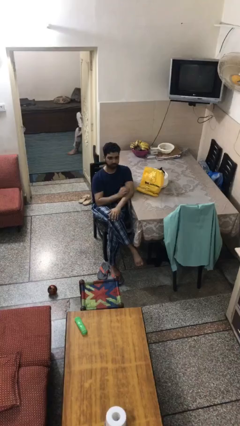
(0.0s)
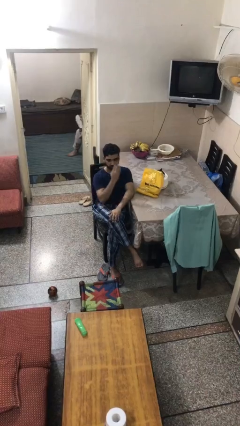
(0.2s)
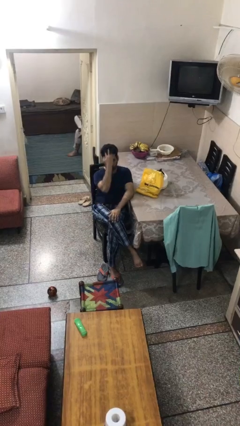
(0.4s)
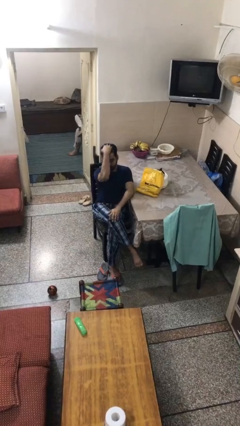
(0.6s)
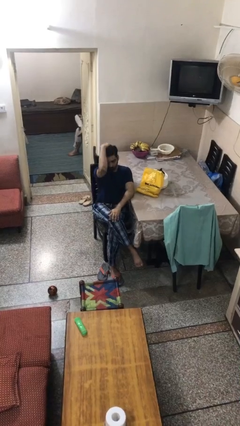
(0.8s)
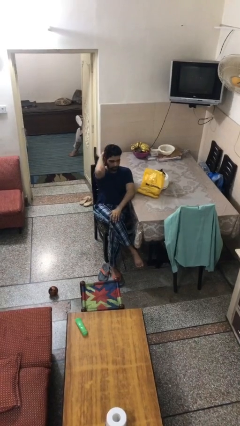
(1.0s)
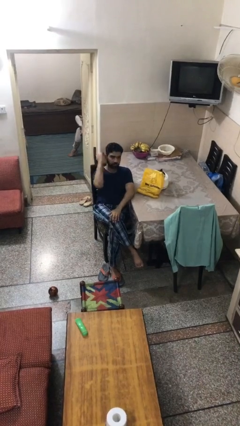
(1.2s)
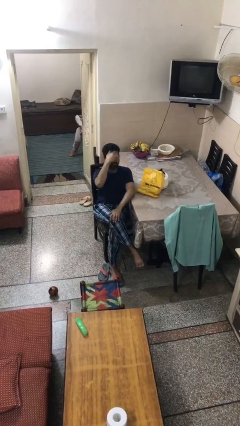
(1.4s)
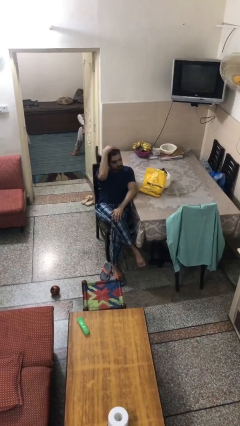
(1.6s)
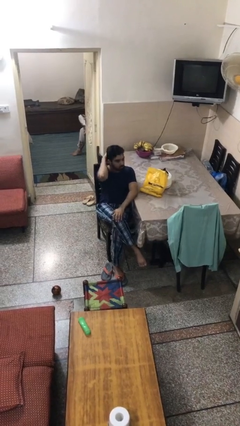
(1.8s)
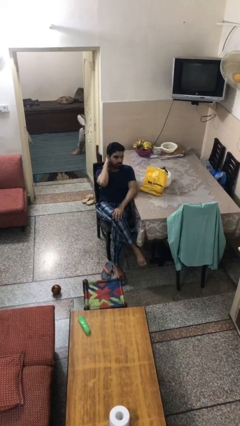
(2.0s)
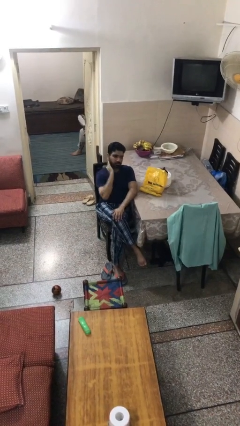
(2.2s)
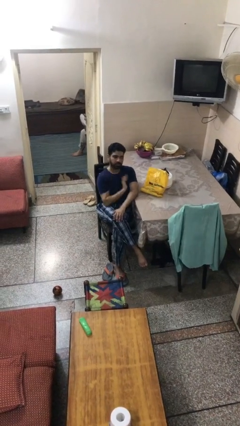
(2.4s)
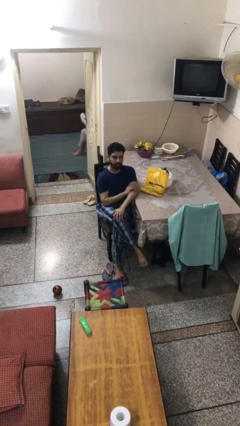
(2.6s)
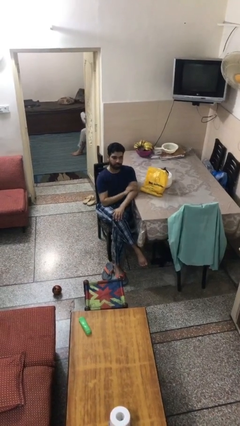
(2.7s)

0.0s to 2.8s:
person strokes hair

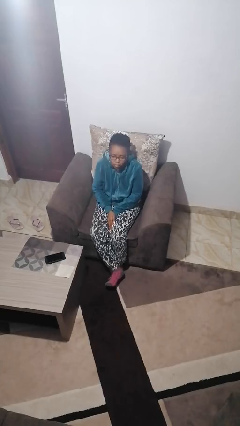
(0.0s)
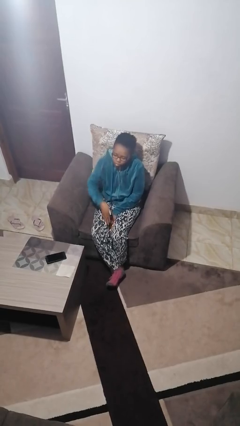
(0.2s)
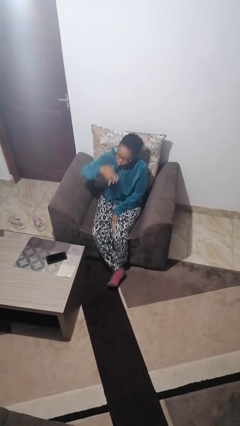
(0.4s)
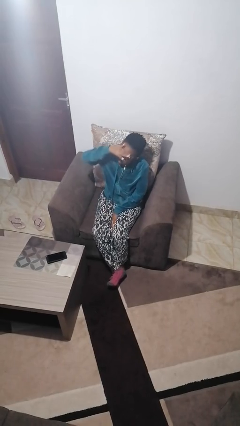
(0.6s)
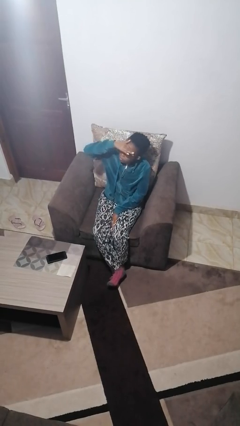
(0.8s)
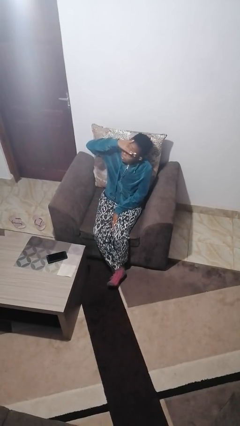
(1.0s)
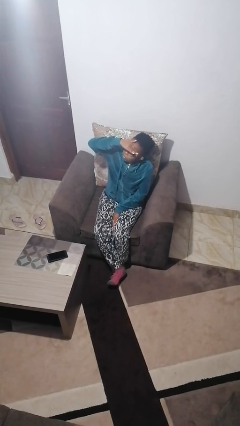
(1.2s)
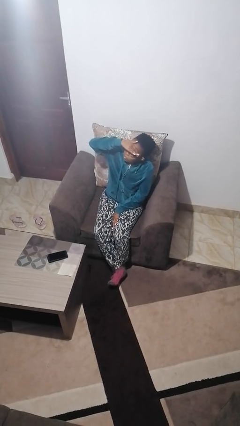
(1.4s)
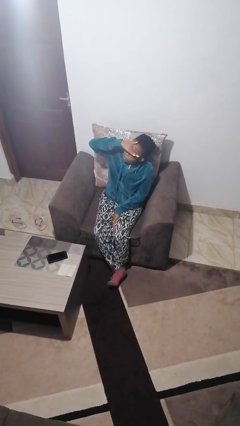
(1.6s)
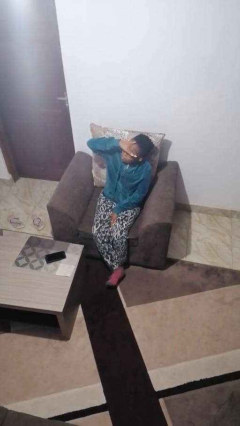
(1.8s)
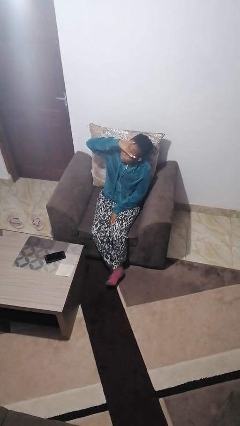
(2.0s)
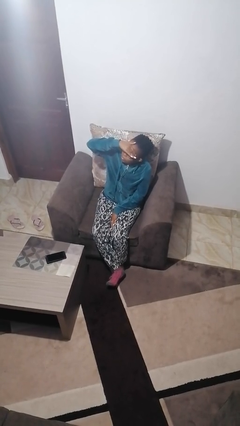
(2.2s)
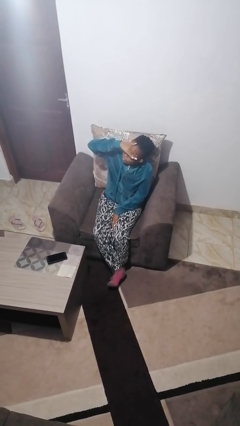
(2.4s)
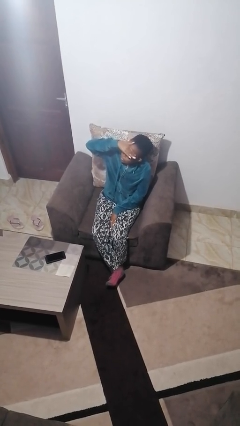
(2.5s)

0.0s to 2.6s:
person shades eyes

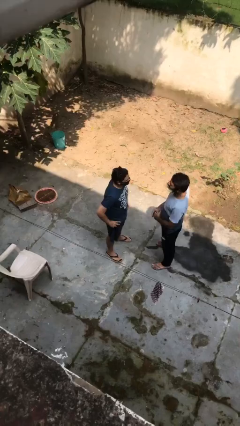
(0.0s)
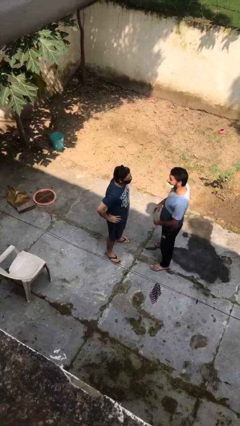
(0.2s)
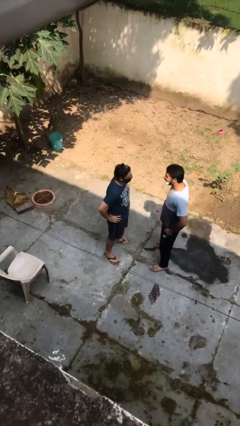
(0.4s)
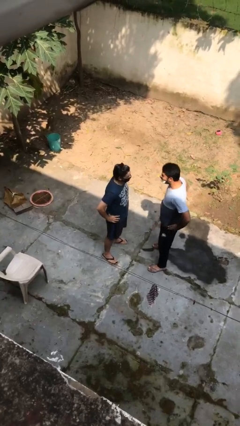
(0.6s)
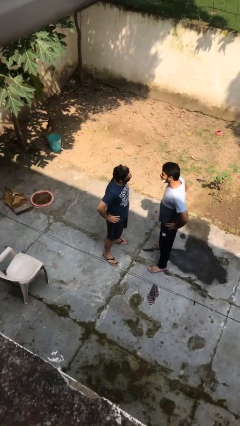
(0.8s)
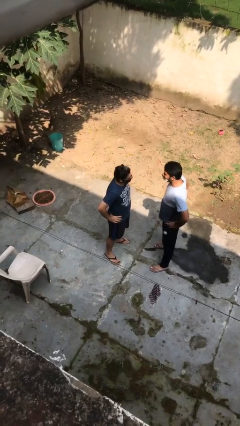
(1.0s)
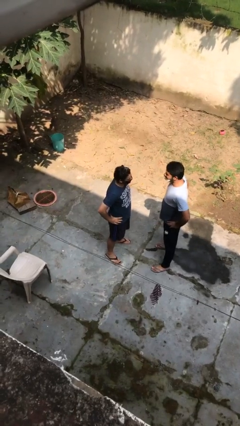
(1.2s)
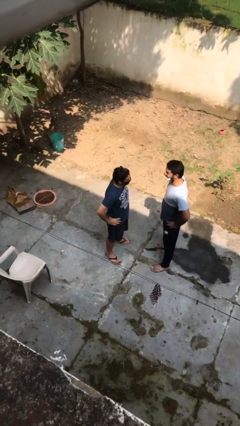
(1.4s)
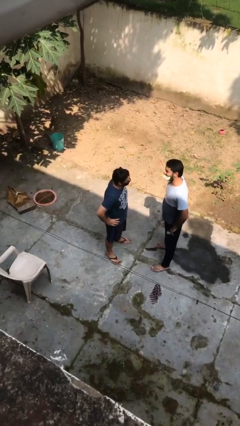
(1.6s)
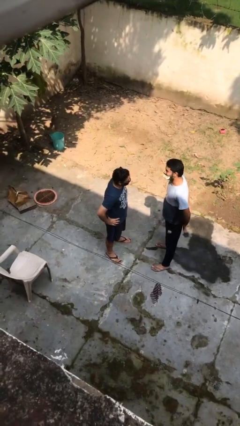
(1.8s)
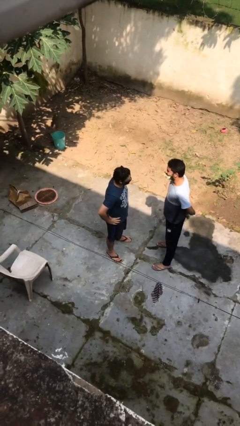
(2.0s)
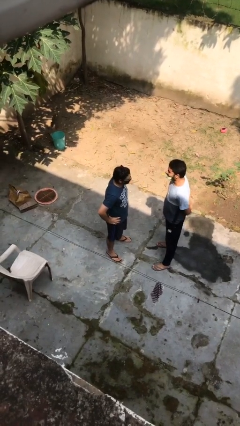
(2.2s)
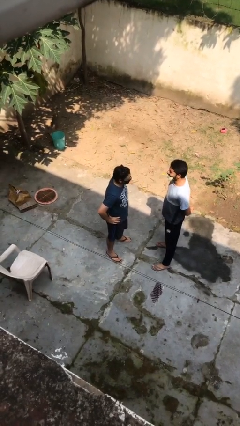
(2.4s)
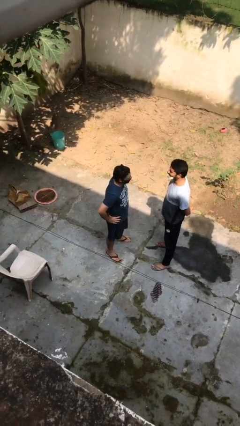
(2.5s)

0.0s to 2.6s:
person talks to person

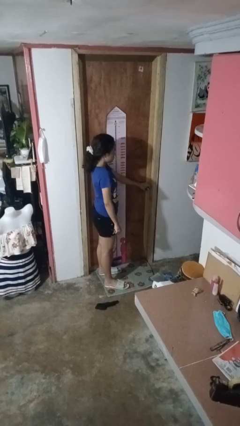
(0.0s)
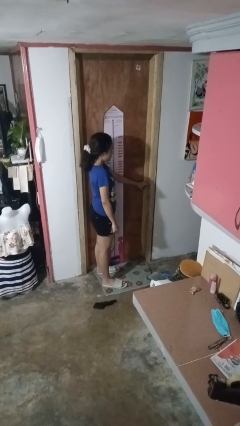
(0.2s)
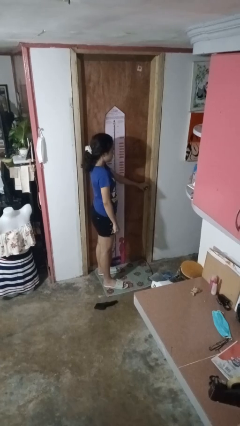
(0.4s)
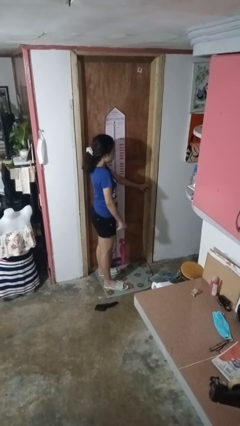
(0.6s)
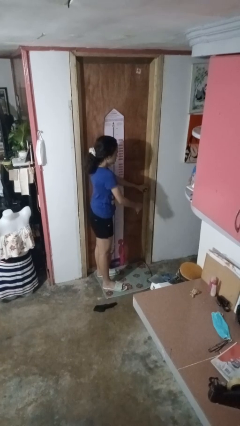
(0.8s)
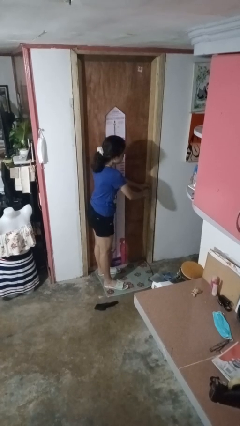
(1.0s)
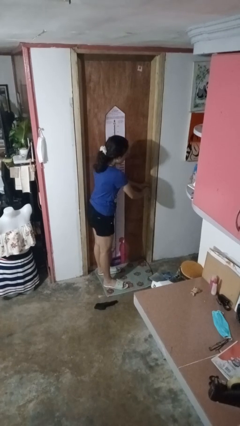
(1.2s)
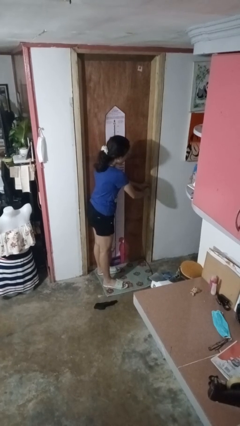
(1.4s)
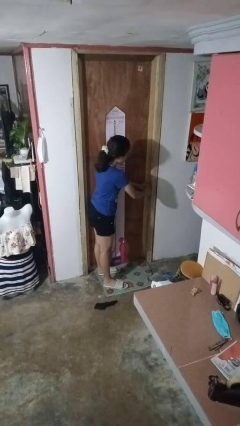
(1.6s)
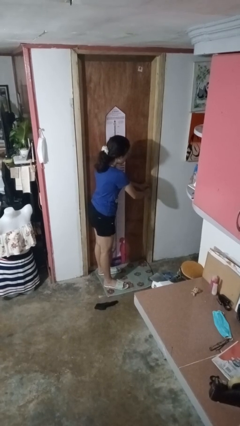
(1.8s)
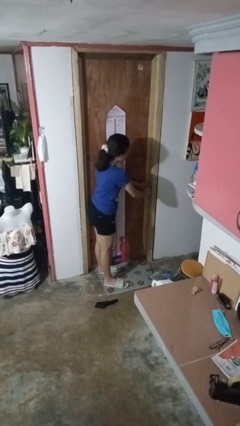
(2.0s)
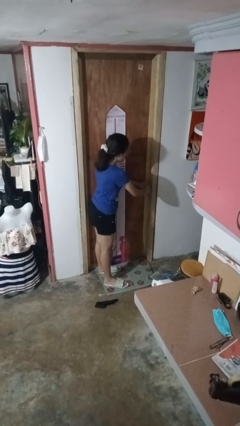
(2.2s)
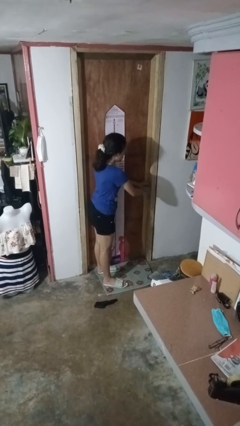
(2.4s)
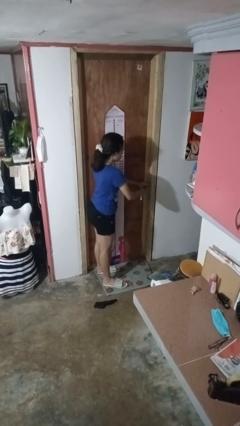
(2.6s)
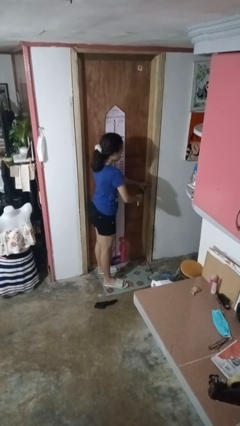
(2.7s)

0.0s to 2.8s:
person locks door with keys

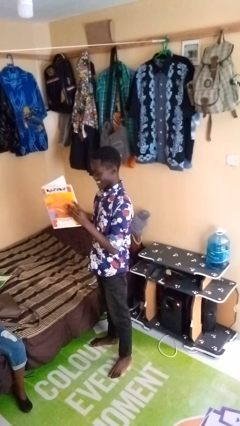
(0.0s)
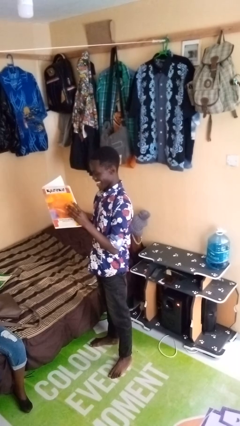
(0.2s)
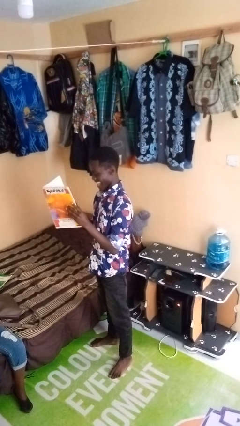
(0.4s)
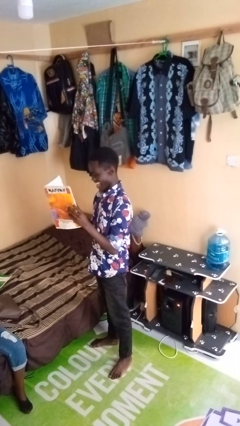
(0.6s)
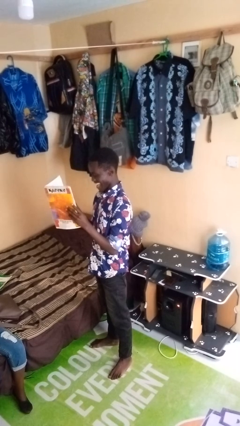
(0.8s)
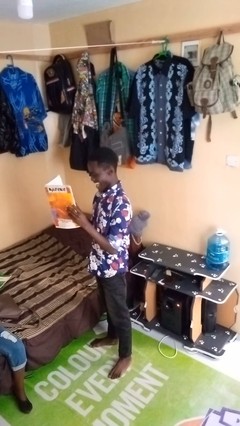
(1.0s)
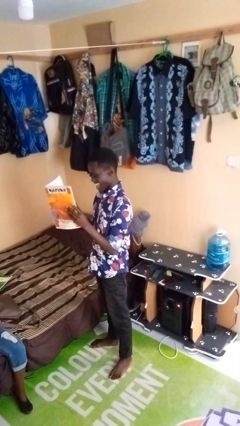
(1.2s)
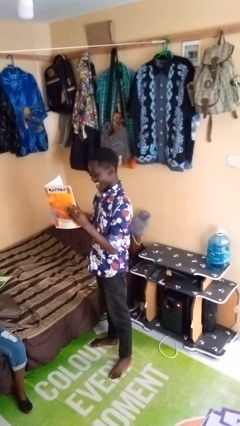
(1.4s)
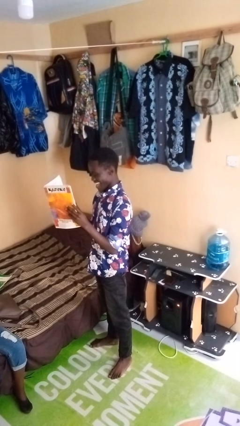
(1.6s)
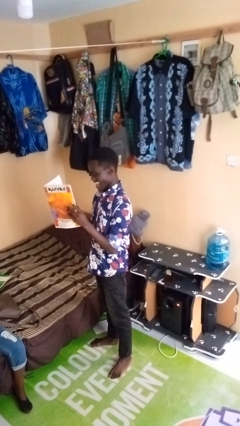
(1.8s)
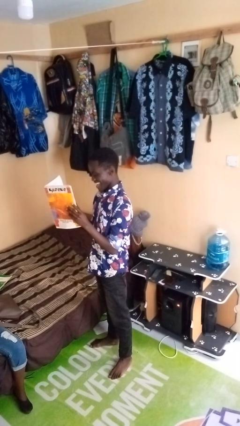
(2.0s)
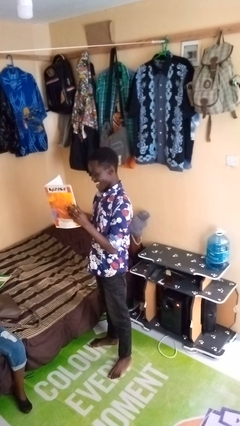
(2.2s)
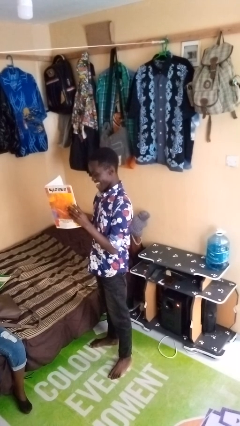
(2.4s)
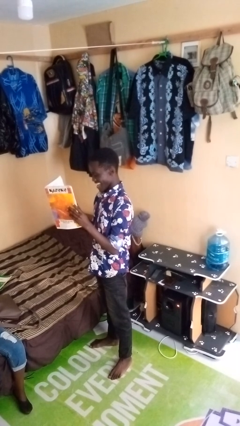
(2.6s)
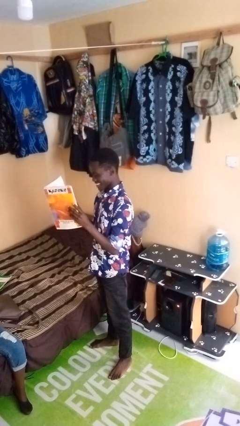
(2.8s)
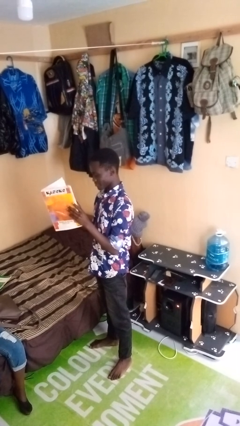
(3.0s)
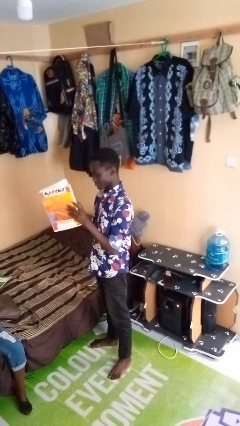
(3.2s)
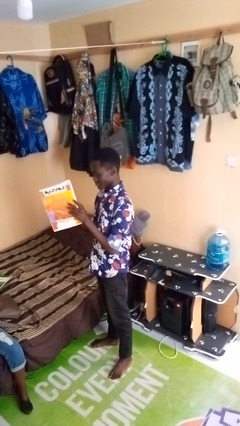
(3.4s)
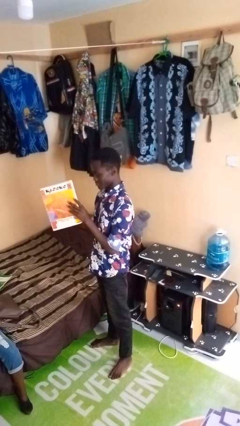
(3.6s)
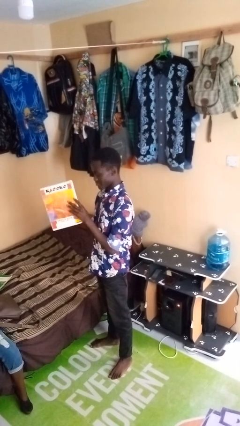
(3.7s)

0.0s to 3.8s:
person reads newspaper

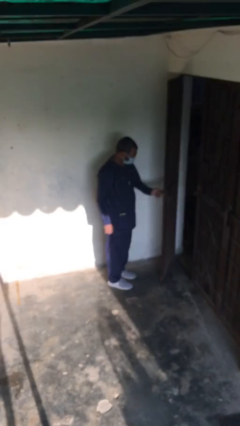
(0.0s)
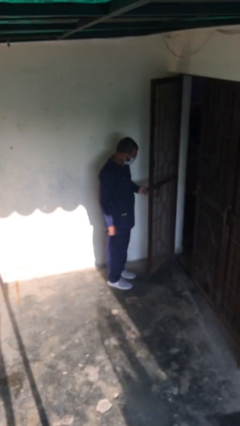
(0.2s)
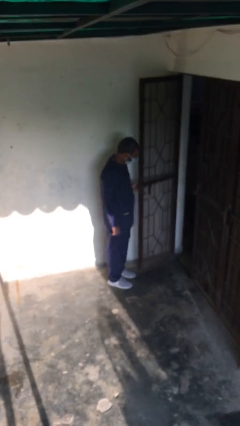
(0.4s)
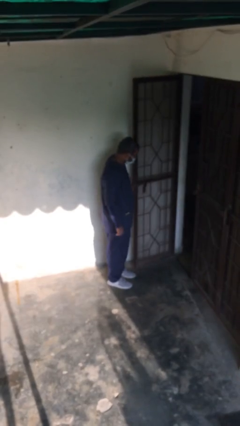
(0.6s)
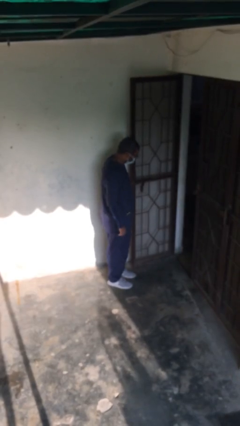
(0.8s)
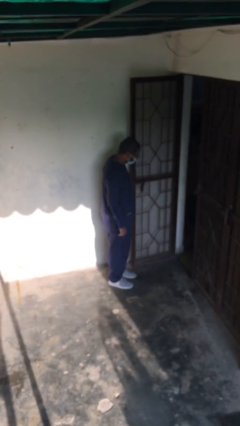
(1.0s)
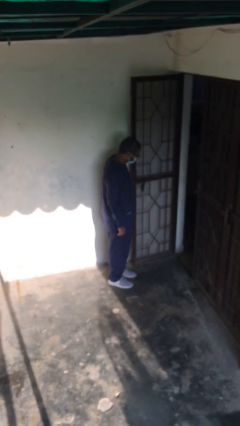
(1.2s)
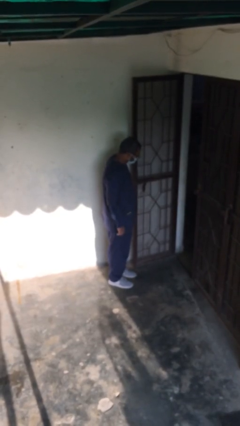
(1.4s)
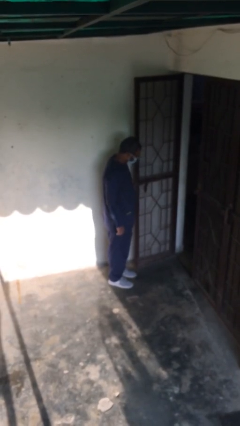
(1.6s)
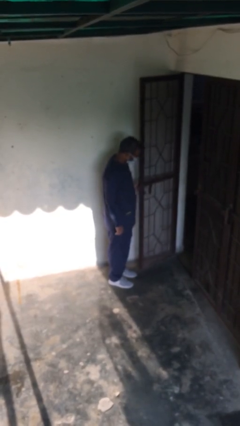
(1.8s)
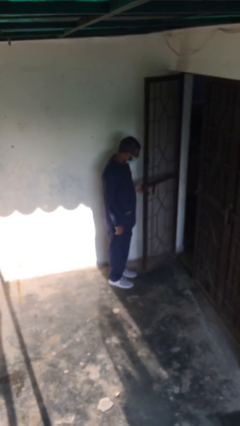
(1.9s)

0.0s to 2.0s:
person opens facility door

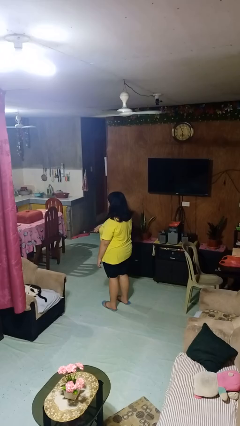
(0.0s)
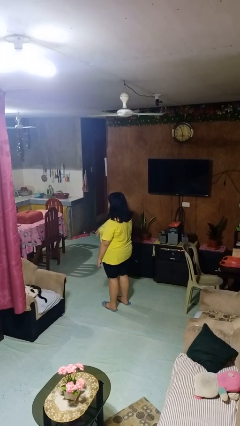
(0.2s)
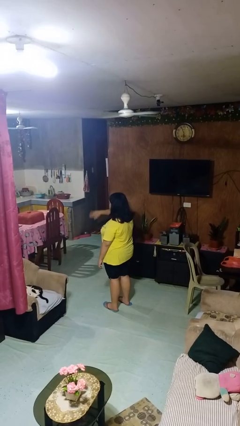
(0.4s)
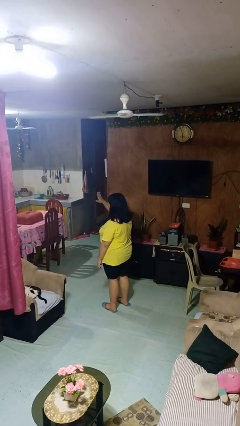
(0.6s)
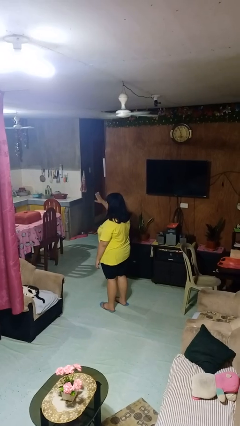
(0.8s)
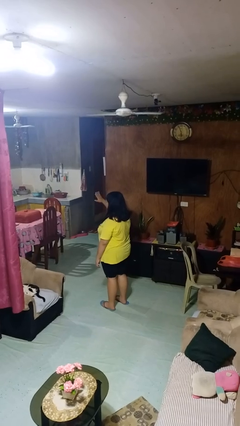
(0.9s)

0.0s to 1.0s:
person gestures swipe up
